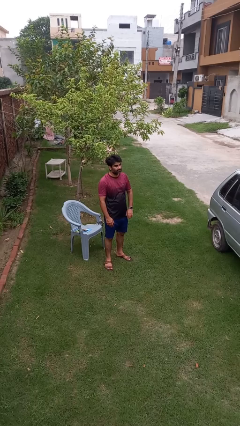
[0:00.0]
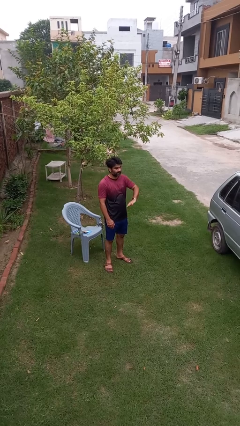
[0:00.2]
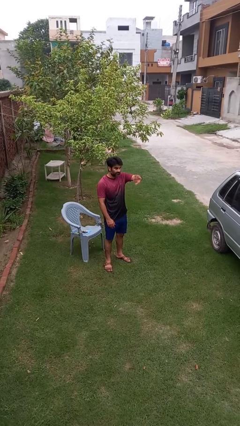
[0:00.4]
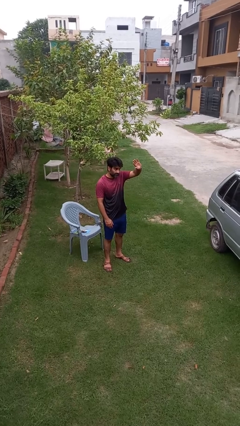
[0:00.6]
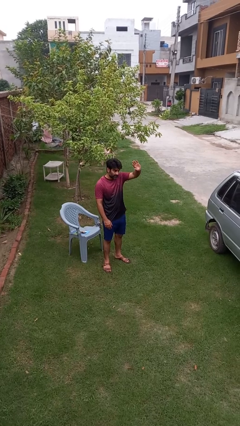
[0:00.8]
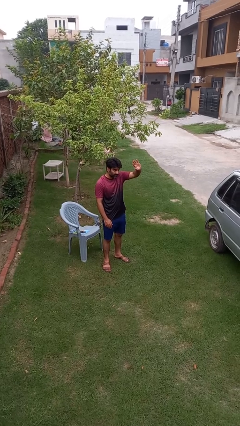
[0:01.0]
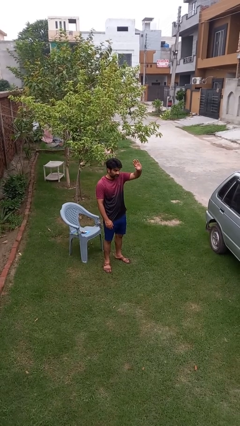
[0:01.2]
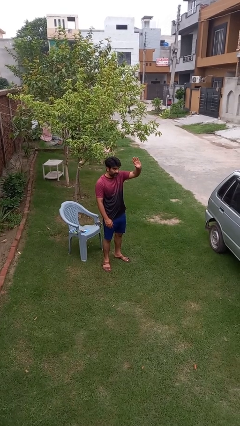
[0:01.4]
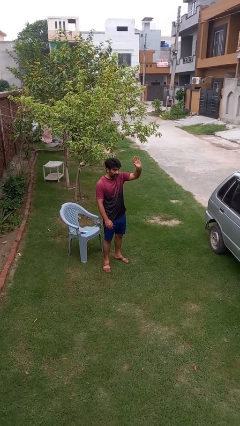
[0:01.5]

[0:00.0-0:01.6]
person gestures swipe up

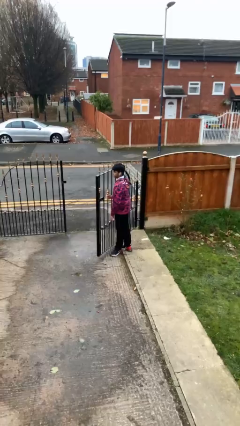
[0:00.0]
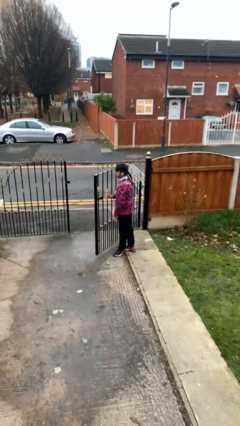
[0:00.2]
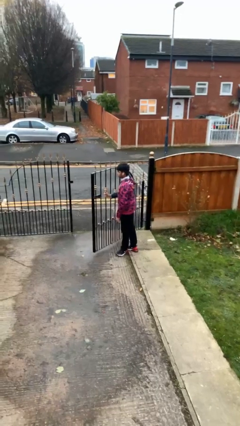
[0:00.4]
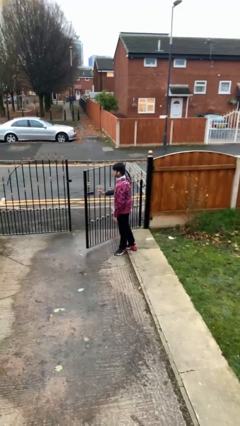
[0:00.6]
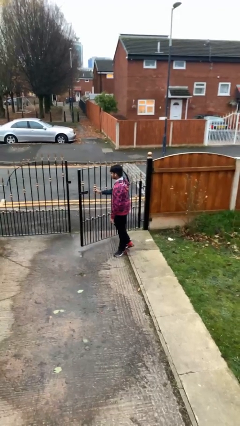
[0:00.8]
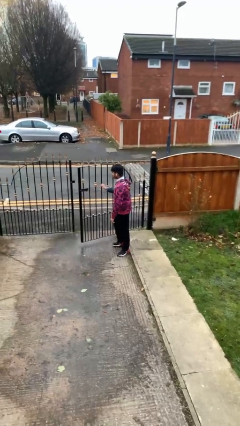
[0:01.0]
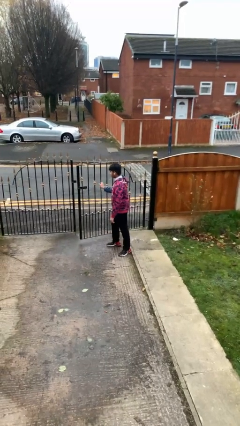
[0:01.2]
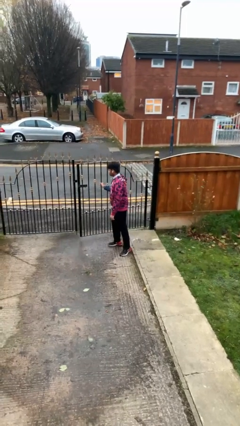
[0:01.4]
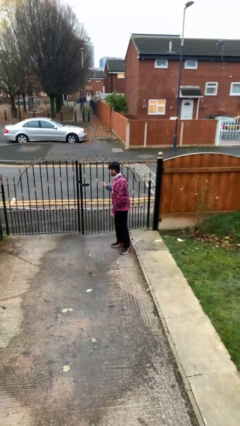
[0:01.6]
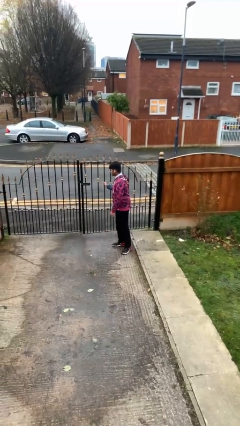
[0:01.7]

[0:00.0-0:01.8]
person closes facility door

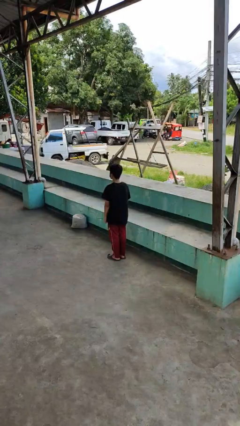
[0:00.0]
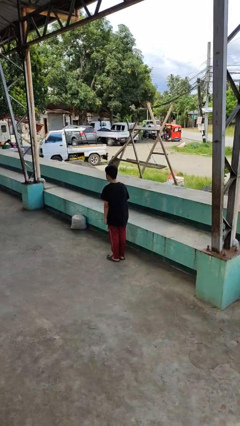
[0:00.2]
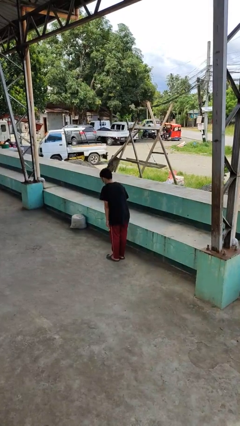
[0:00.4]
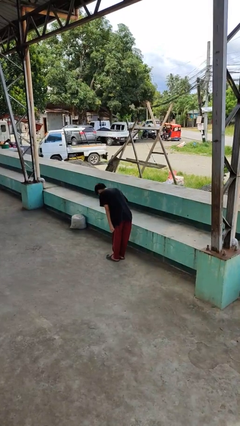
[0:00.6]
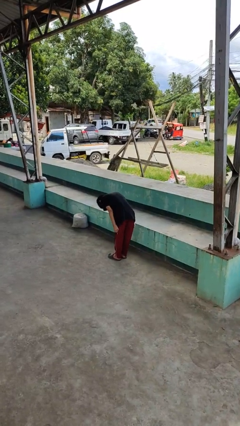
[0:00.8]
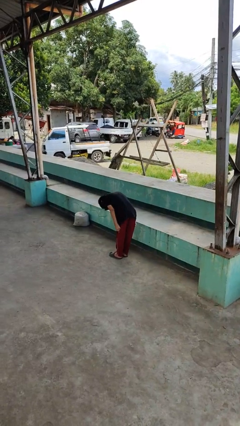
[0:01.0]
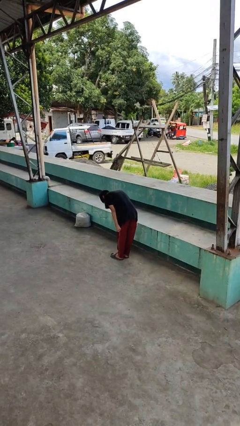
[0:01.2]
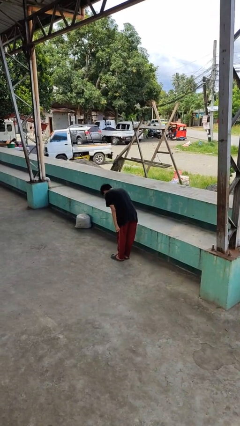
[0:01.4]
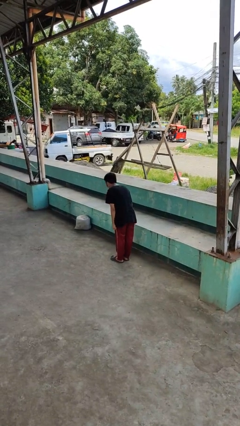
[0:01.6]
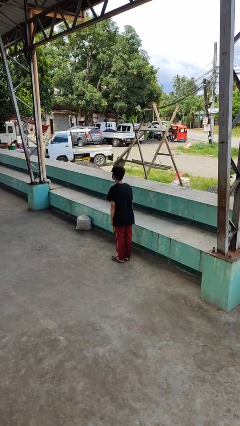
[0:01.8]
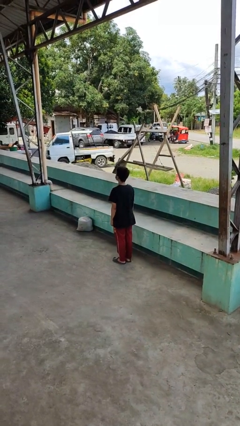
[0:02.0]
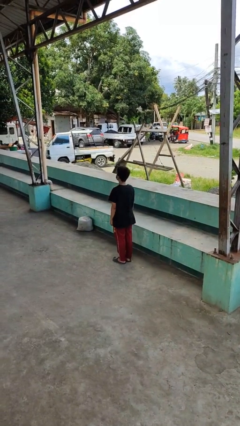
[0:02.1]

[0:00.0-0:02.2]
person bows

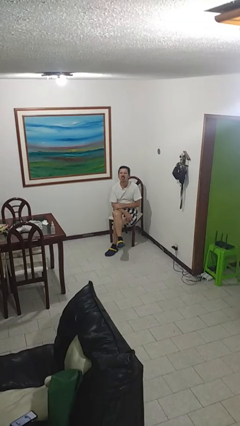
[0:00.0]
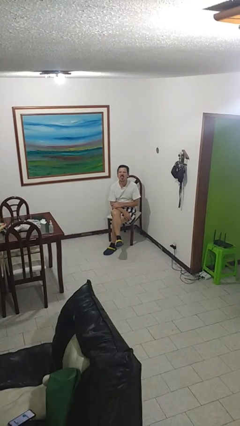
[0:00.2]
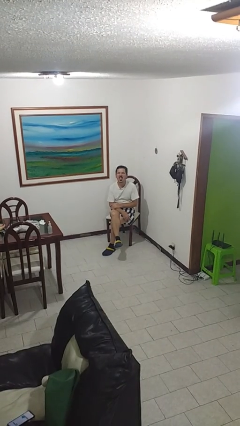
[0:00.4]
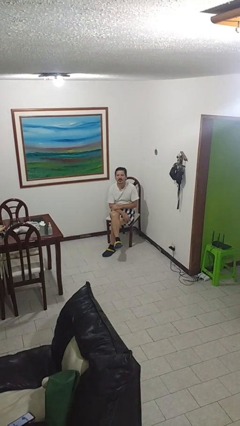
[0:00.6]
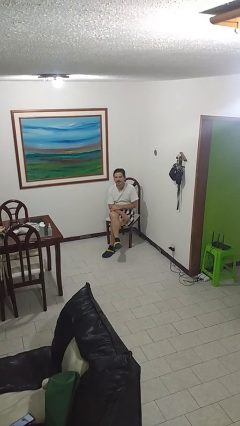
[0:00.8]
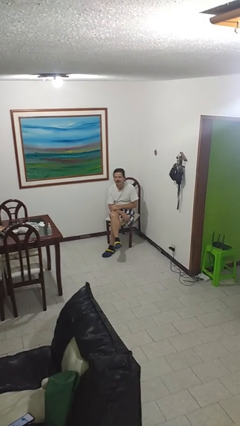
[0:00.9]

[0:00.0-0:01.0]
person sticks out tongue

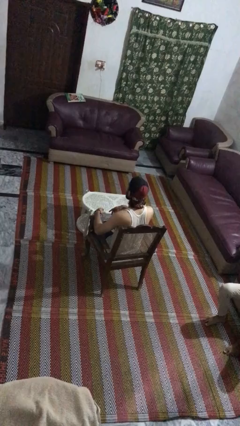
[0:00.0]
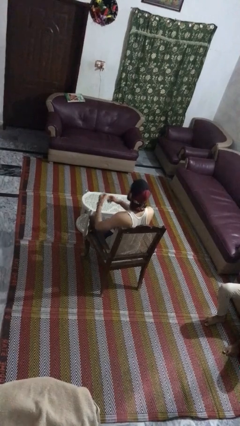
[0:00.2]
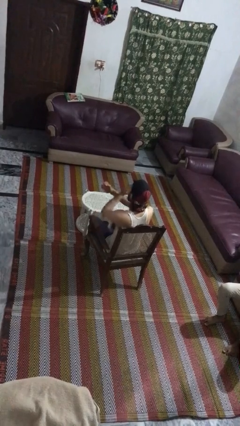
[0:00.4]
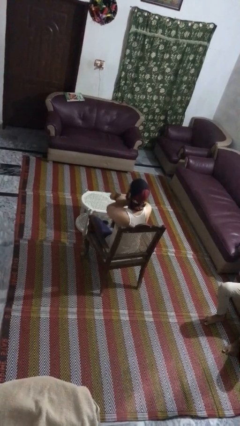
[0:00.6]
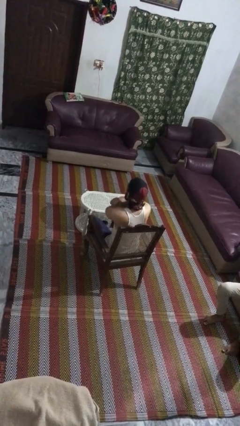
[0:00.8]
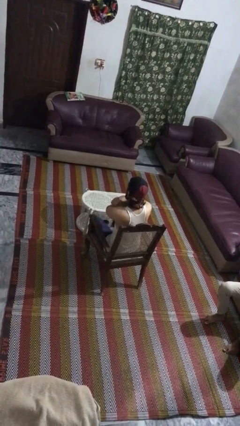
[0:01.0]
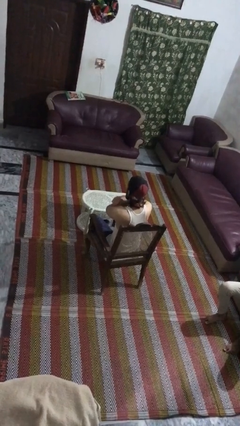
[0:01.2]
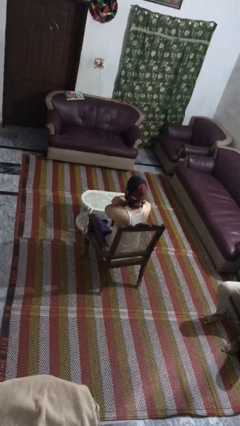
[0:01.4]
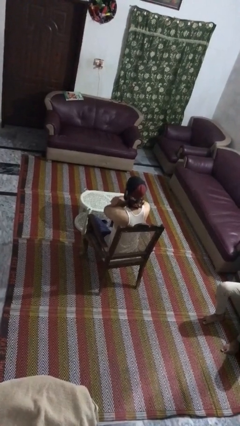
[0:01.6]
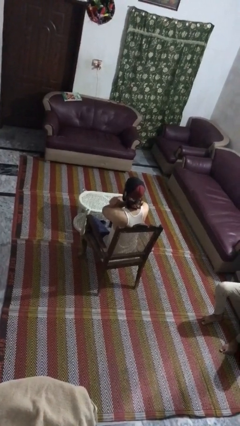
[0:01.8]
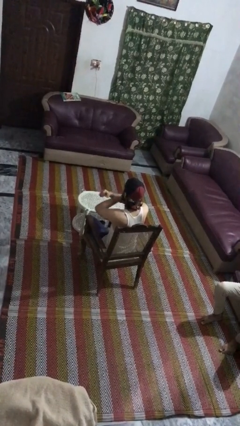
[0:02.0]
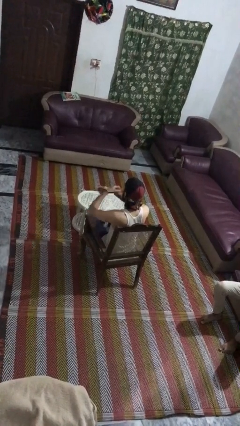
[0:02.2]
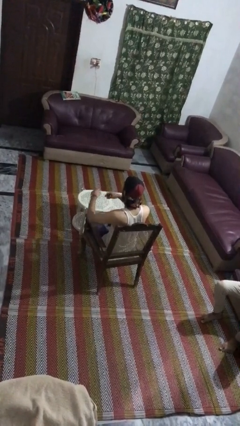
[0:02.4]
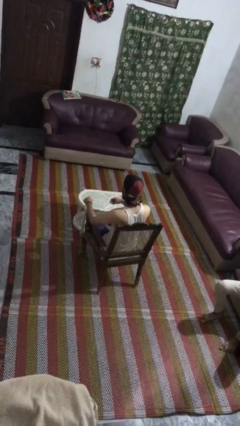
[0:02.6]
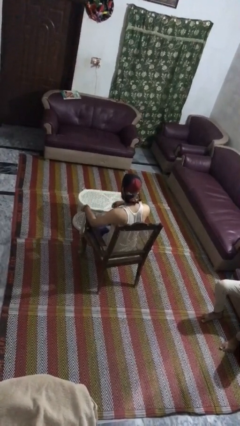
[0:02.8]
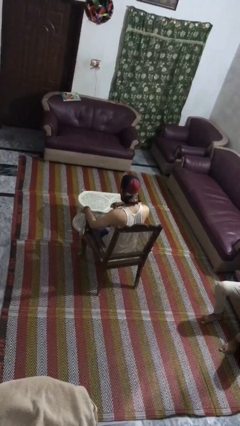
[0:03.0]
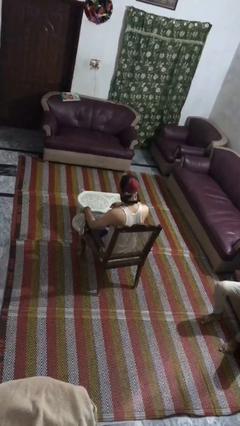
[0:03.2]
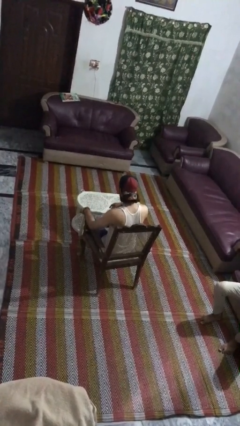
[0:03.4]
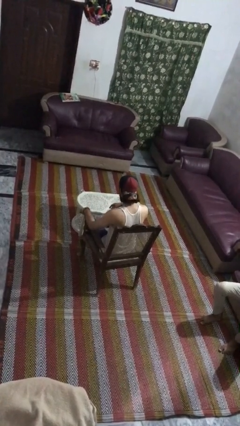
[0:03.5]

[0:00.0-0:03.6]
person gestures arms x

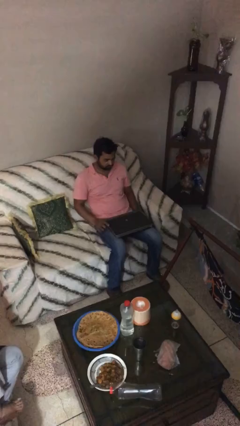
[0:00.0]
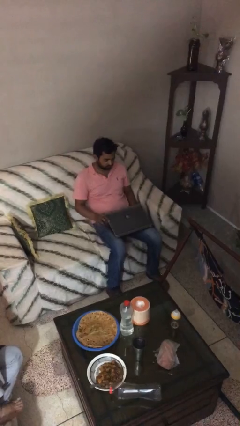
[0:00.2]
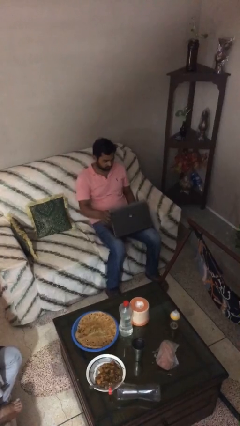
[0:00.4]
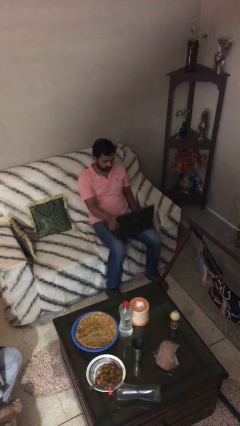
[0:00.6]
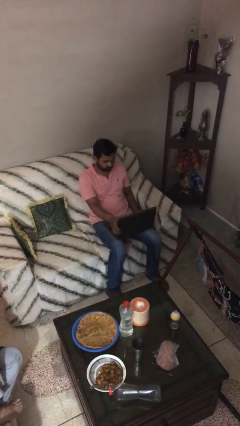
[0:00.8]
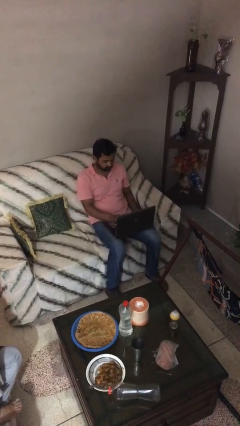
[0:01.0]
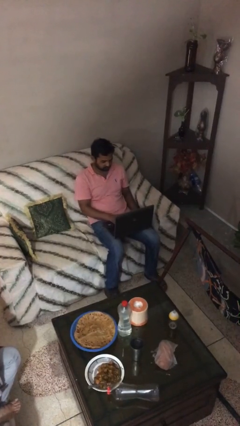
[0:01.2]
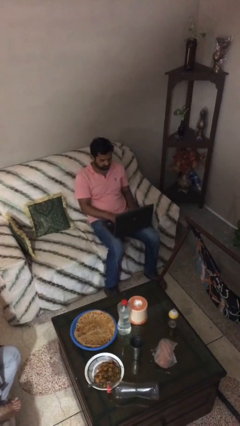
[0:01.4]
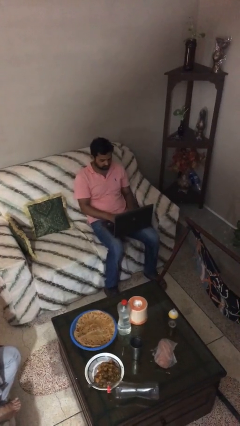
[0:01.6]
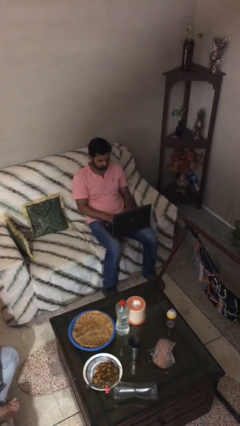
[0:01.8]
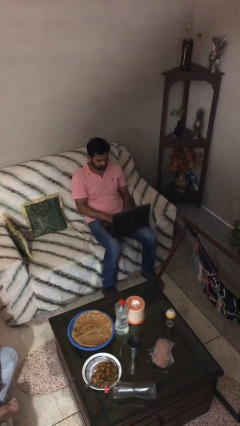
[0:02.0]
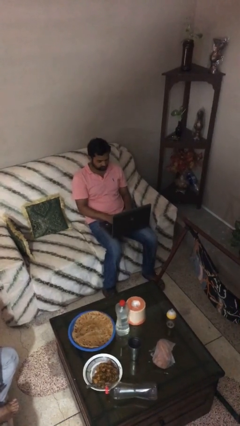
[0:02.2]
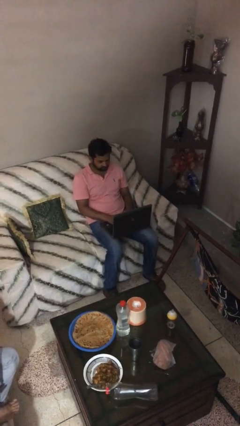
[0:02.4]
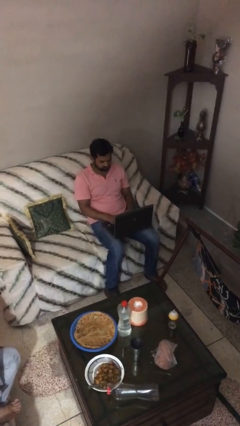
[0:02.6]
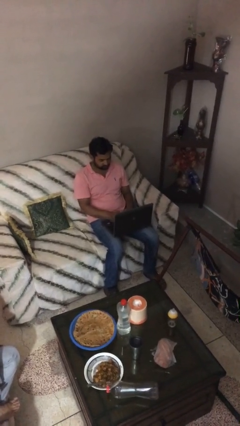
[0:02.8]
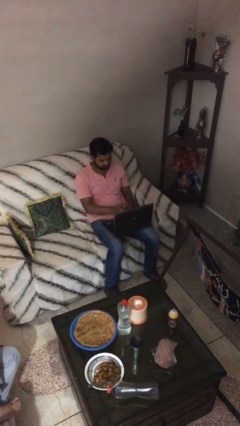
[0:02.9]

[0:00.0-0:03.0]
person interacts with laptop

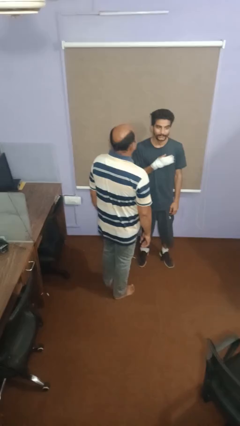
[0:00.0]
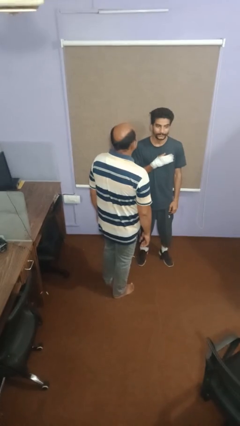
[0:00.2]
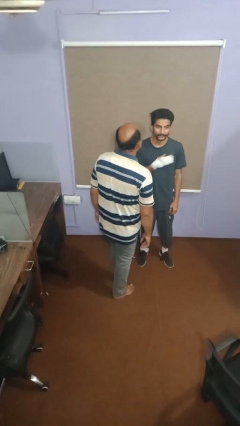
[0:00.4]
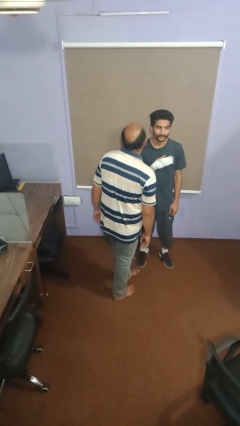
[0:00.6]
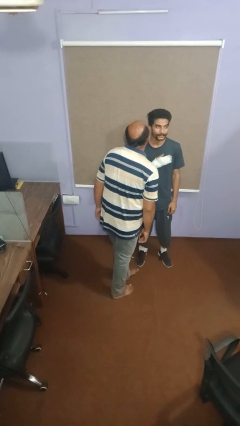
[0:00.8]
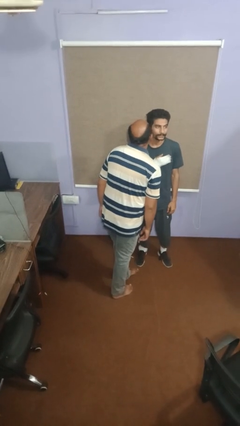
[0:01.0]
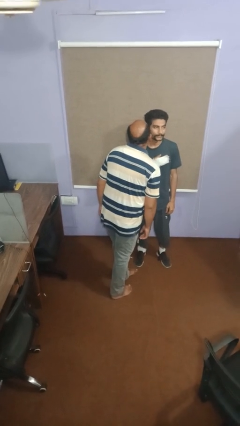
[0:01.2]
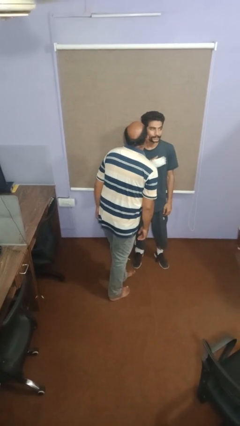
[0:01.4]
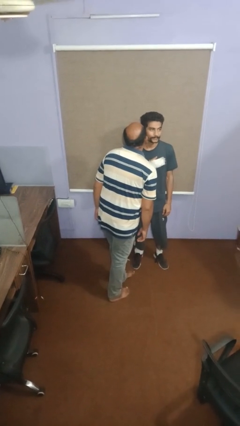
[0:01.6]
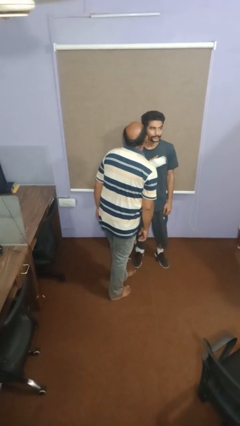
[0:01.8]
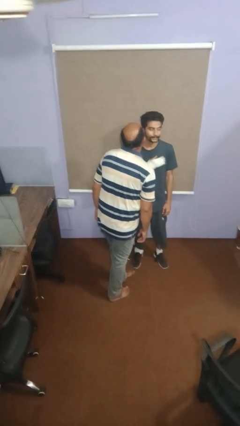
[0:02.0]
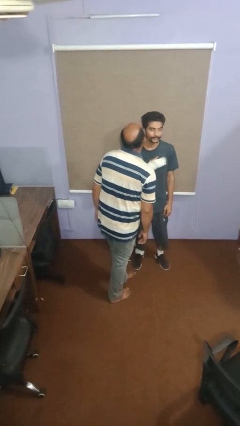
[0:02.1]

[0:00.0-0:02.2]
person kisses cheek of person

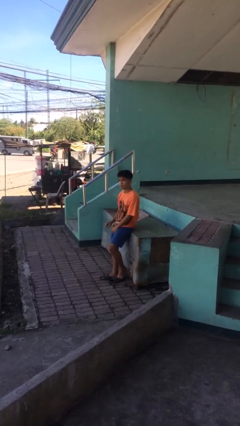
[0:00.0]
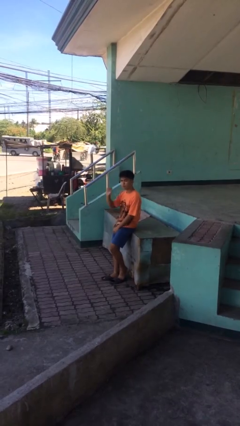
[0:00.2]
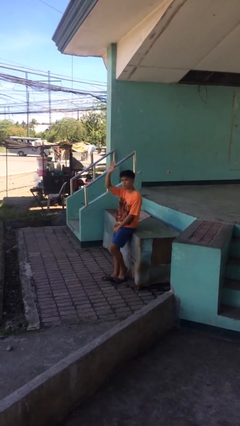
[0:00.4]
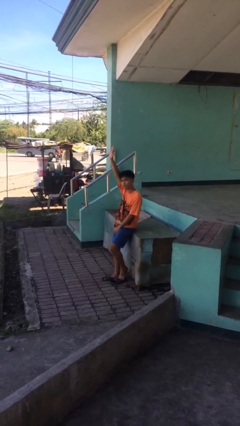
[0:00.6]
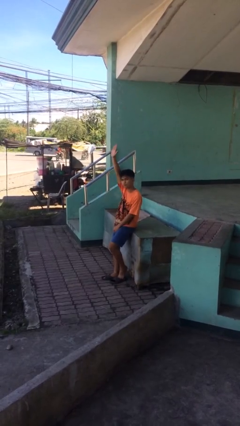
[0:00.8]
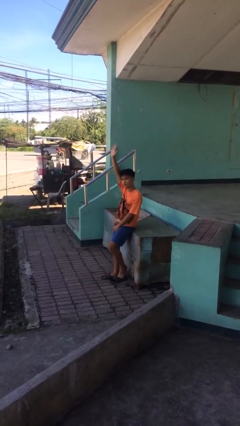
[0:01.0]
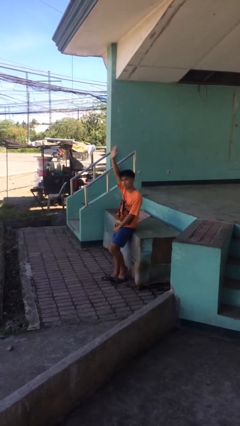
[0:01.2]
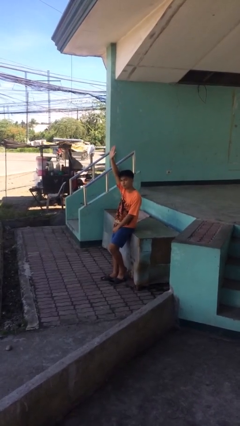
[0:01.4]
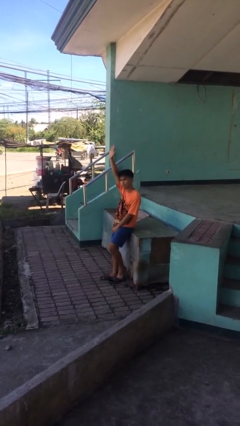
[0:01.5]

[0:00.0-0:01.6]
person gestures raise hand
